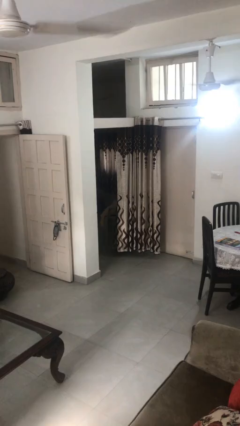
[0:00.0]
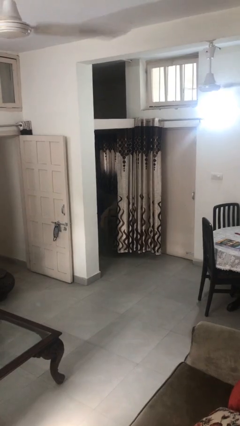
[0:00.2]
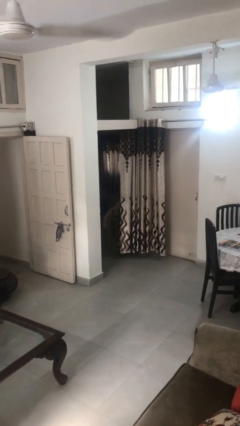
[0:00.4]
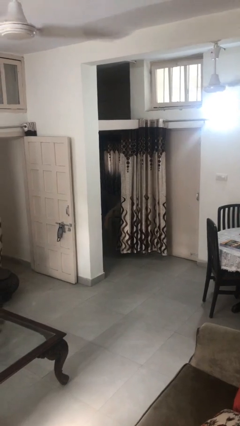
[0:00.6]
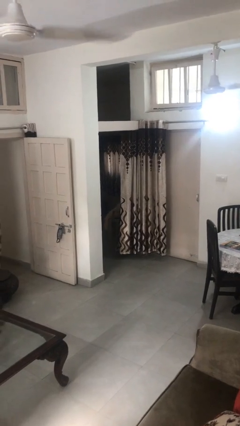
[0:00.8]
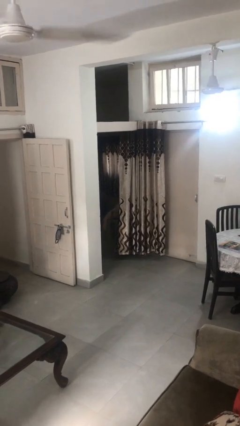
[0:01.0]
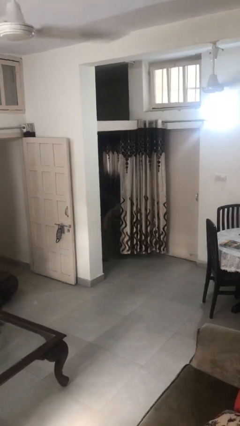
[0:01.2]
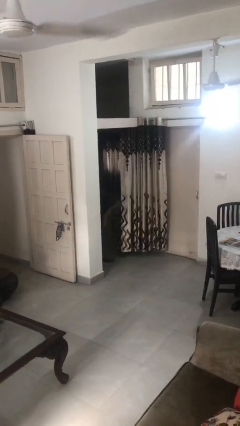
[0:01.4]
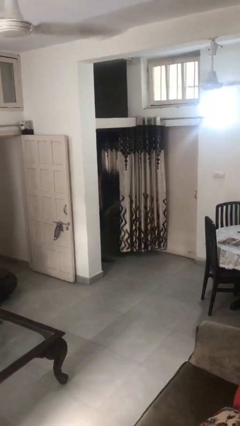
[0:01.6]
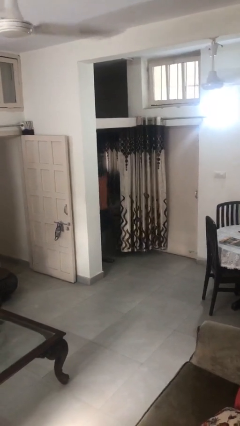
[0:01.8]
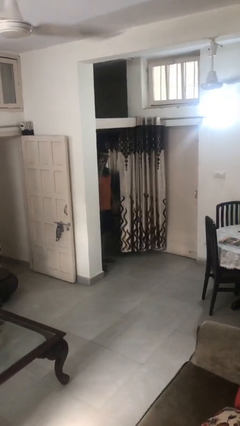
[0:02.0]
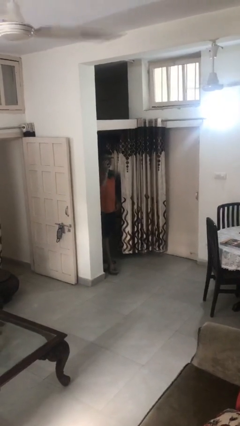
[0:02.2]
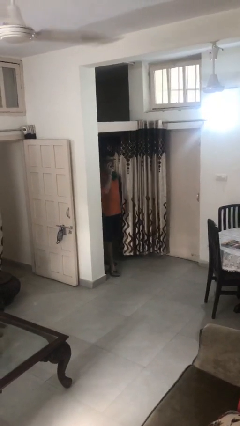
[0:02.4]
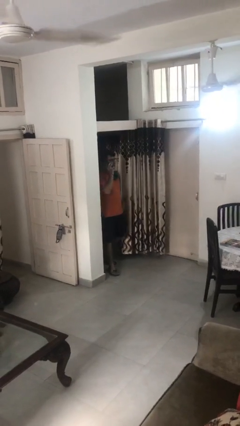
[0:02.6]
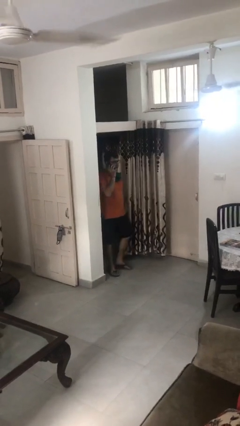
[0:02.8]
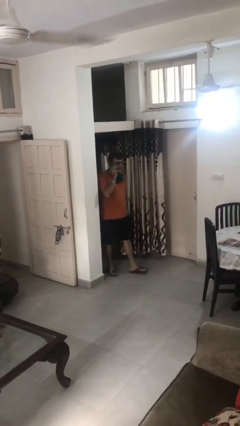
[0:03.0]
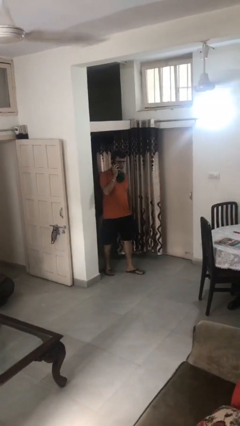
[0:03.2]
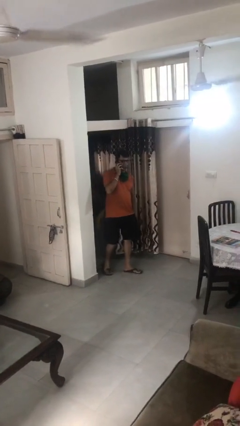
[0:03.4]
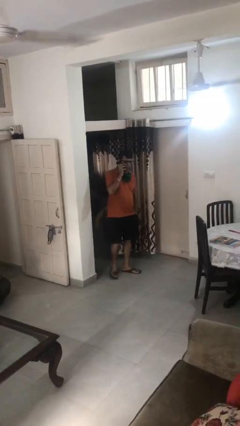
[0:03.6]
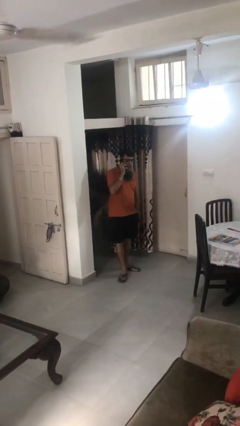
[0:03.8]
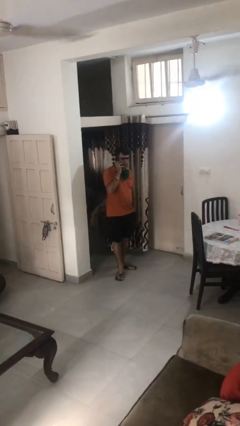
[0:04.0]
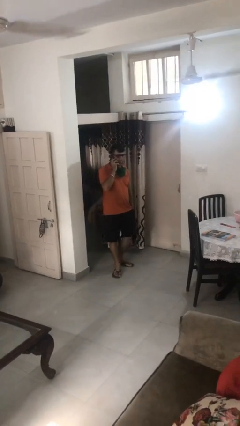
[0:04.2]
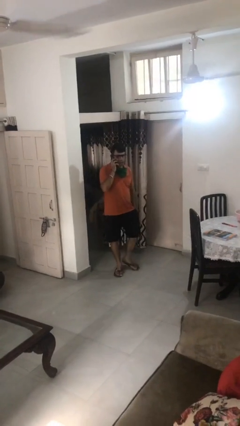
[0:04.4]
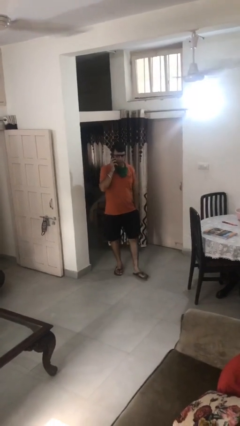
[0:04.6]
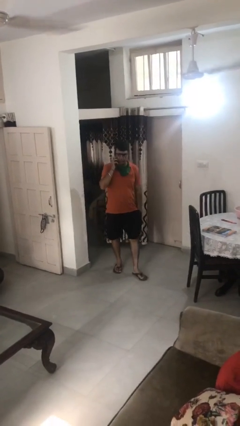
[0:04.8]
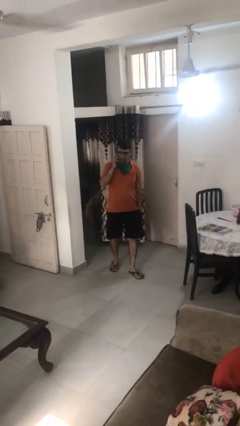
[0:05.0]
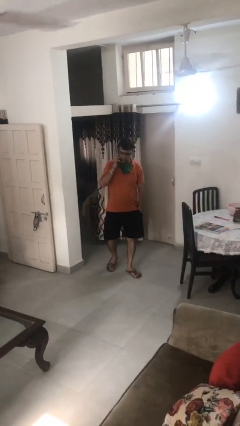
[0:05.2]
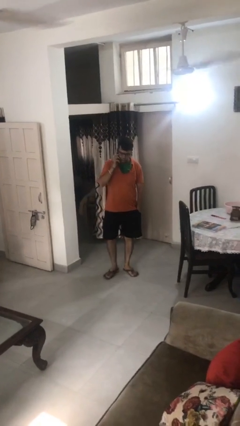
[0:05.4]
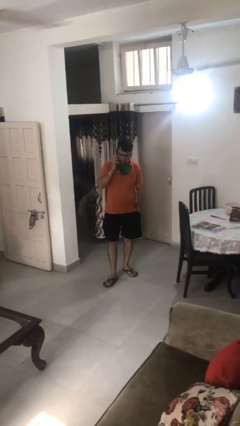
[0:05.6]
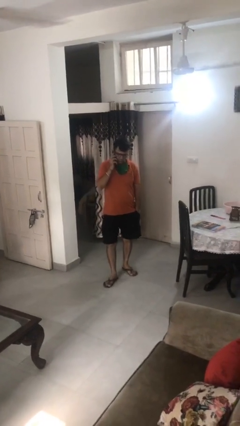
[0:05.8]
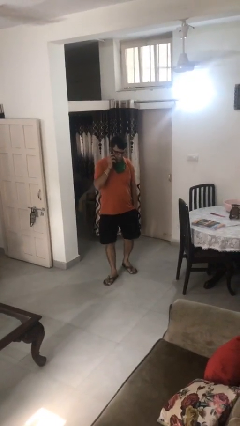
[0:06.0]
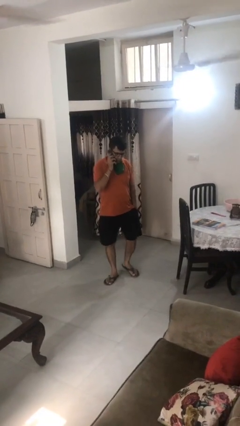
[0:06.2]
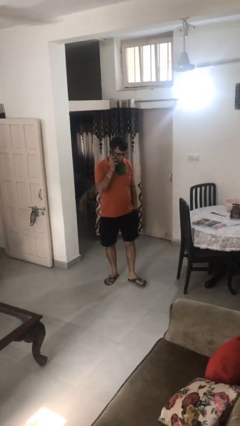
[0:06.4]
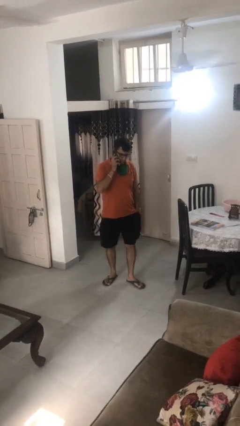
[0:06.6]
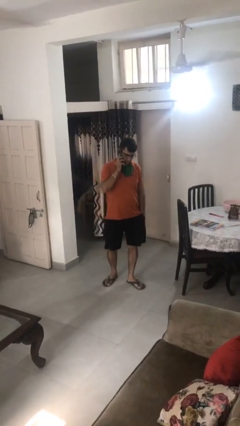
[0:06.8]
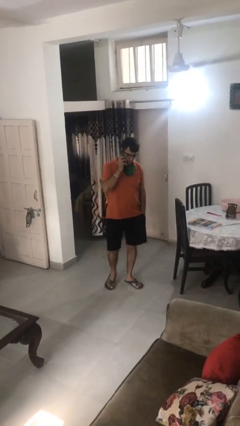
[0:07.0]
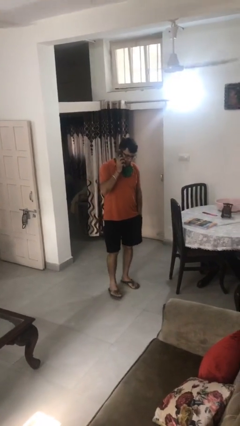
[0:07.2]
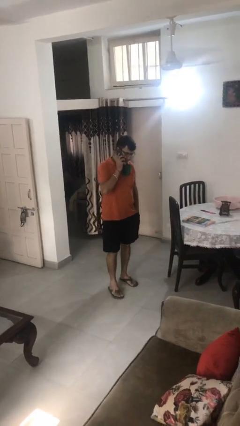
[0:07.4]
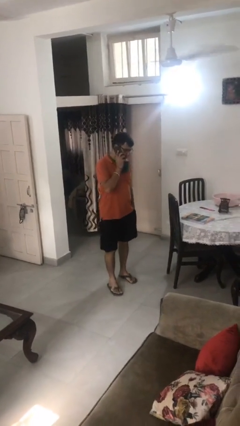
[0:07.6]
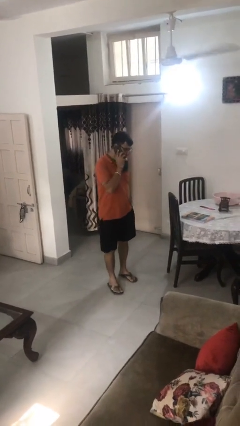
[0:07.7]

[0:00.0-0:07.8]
person enters scene through structure

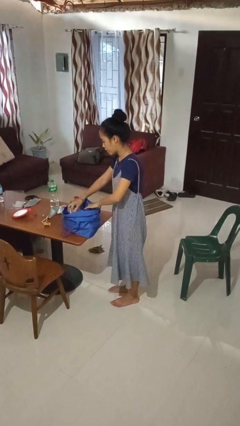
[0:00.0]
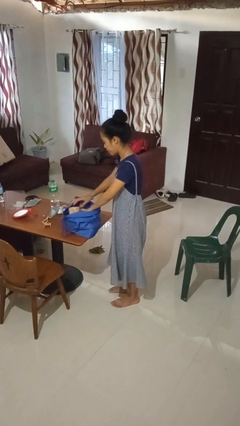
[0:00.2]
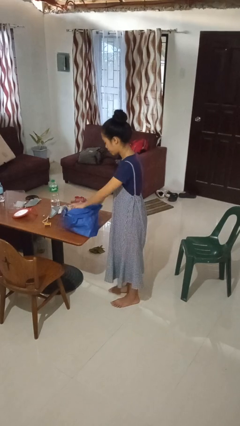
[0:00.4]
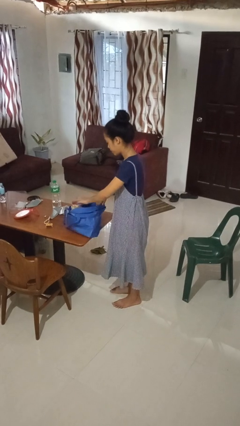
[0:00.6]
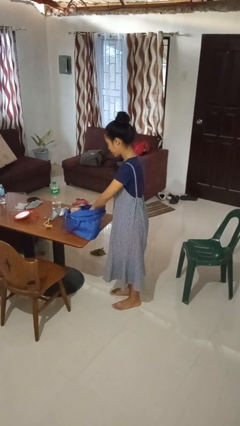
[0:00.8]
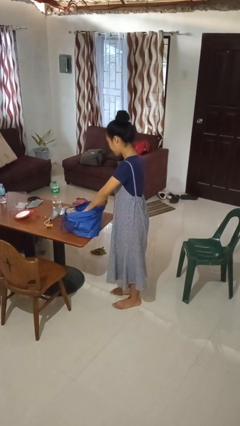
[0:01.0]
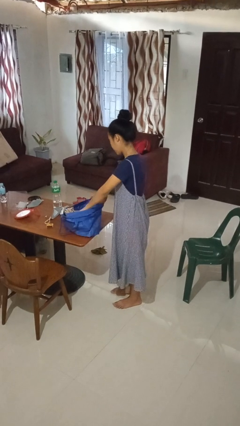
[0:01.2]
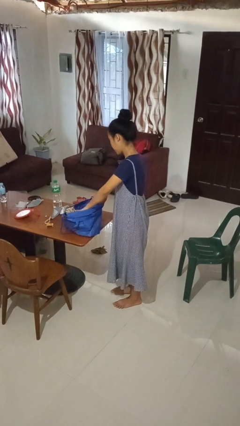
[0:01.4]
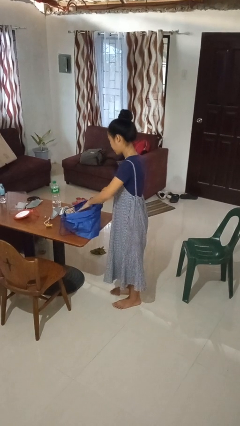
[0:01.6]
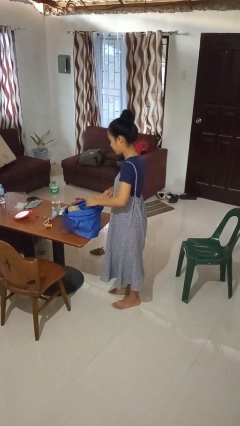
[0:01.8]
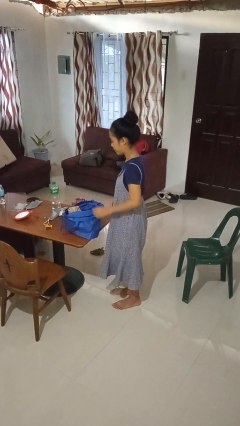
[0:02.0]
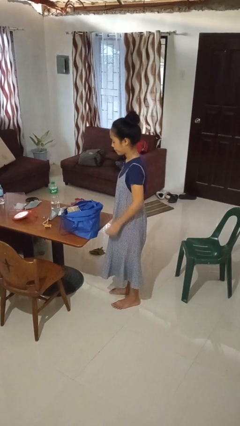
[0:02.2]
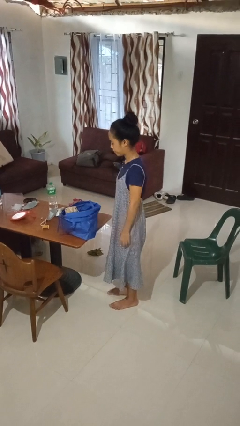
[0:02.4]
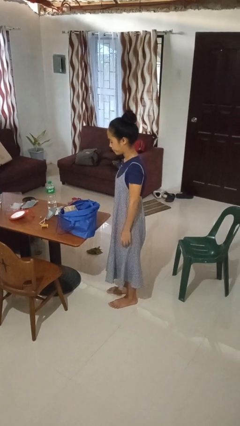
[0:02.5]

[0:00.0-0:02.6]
person searches in bag

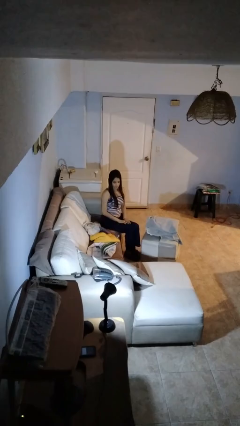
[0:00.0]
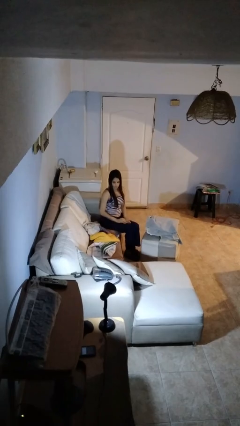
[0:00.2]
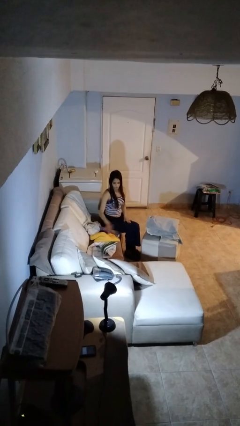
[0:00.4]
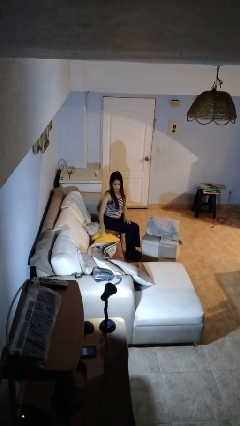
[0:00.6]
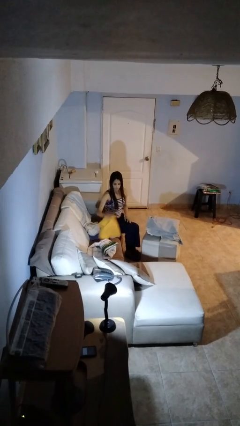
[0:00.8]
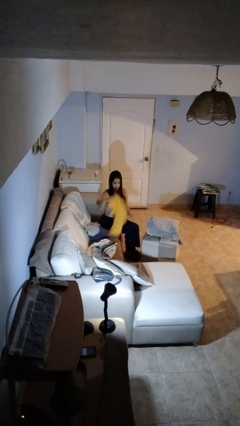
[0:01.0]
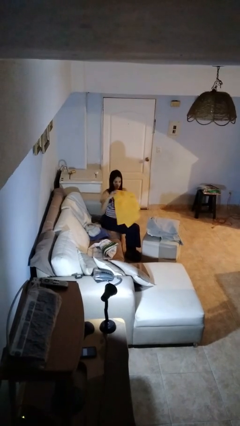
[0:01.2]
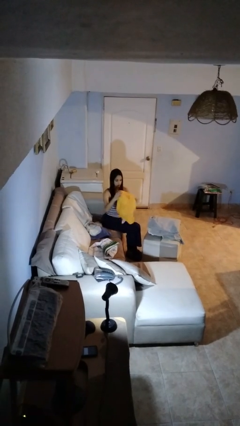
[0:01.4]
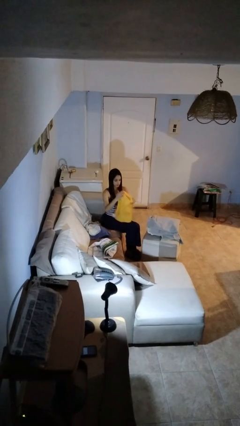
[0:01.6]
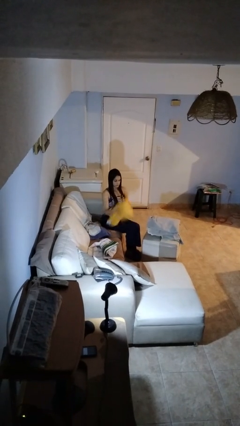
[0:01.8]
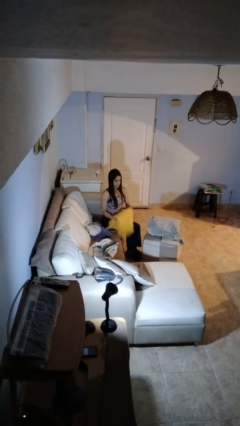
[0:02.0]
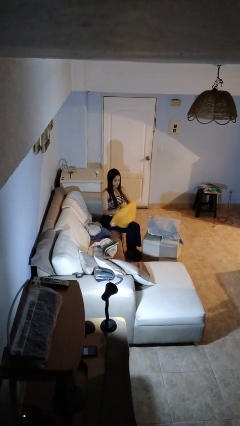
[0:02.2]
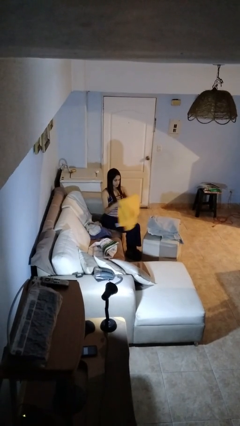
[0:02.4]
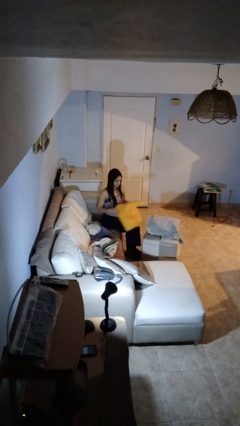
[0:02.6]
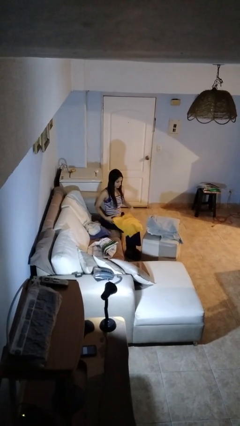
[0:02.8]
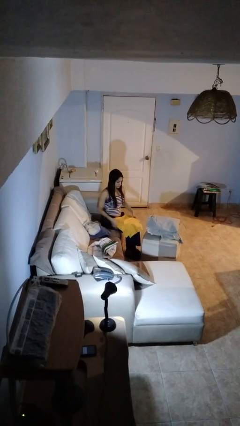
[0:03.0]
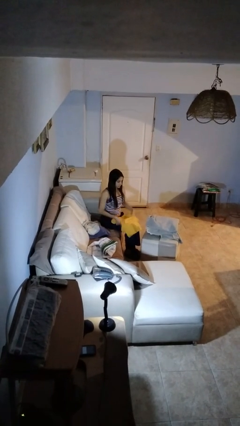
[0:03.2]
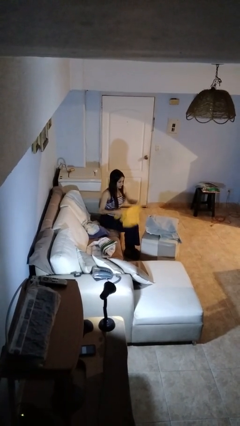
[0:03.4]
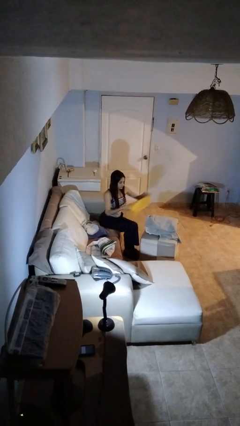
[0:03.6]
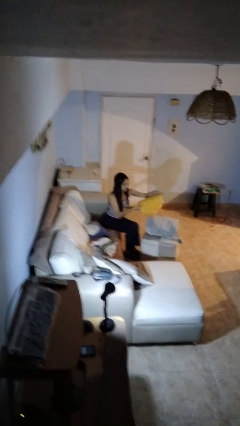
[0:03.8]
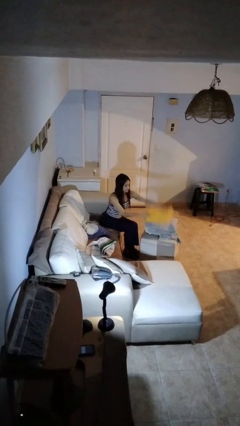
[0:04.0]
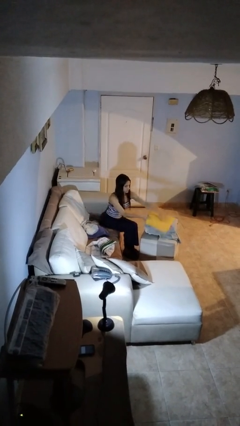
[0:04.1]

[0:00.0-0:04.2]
person folds towel

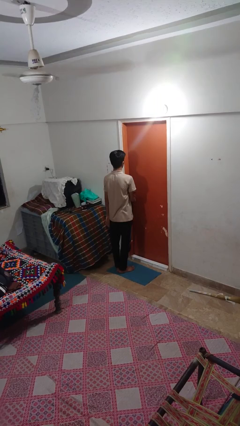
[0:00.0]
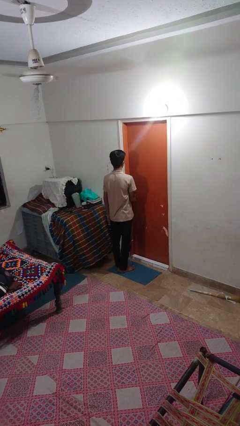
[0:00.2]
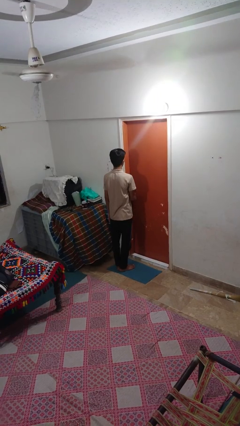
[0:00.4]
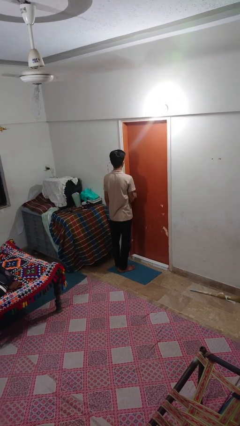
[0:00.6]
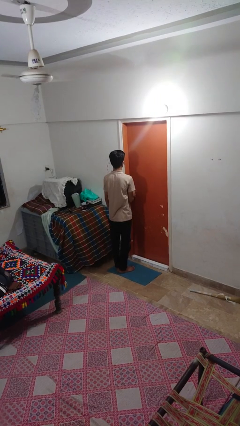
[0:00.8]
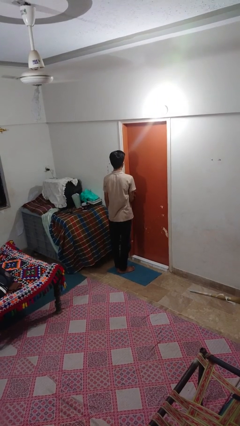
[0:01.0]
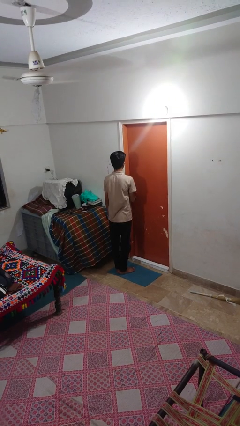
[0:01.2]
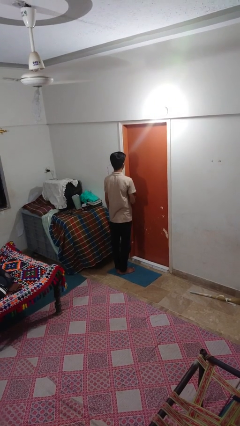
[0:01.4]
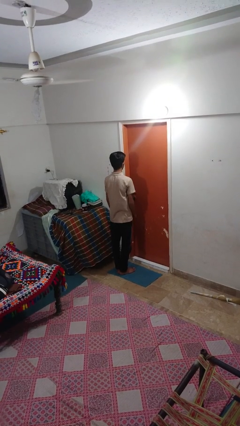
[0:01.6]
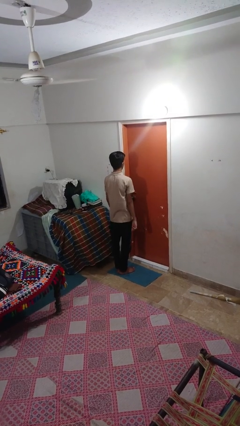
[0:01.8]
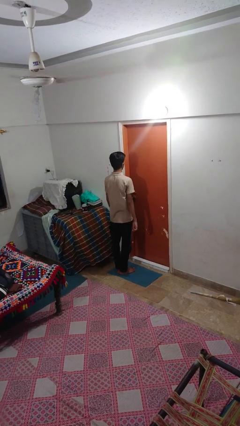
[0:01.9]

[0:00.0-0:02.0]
person locks door with keys

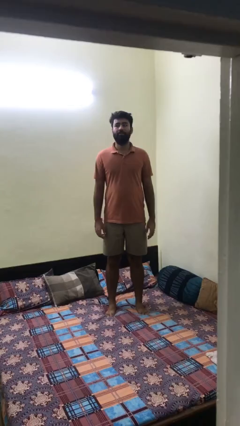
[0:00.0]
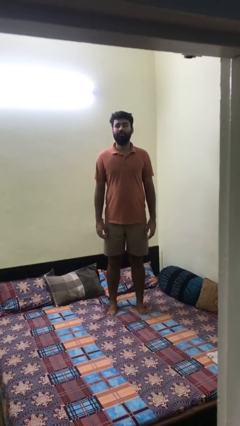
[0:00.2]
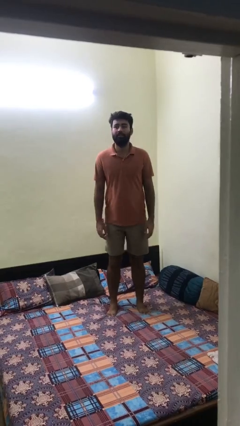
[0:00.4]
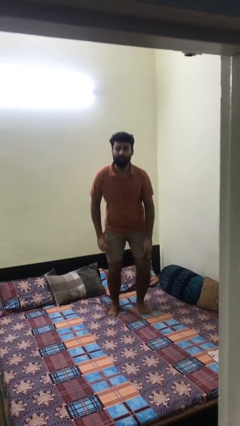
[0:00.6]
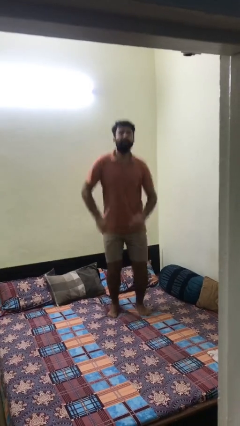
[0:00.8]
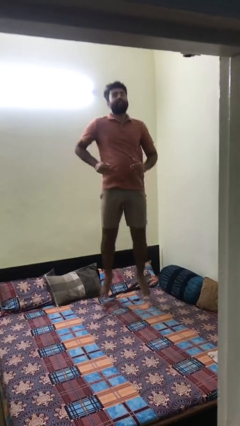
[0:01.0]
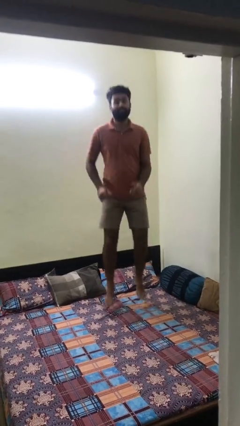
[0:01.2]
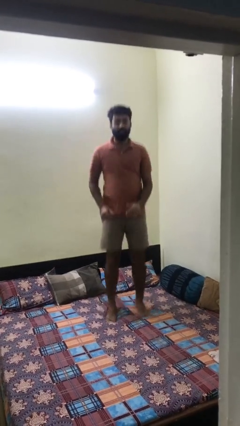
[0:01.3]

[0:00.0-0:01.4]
person jumps on bed
